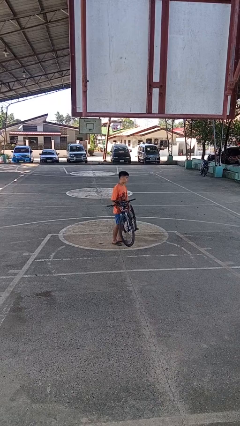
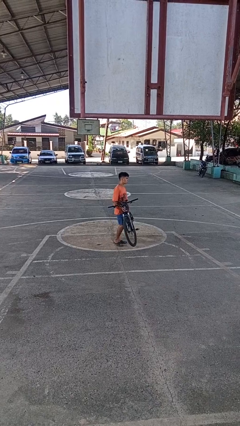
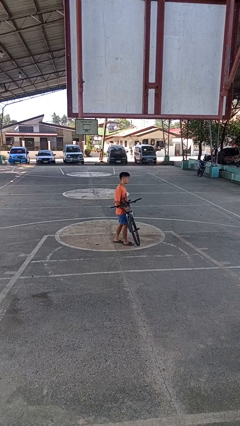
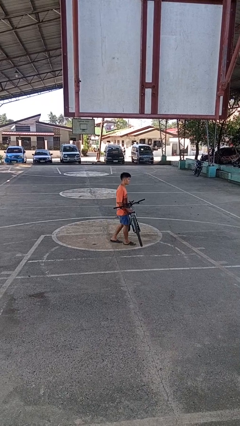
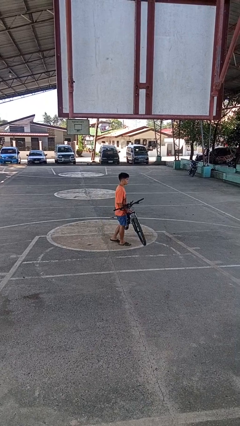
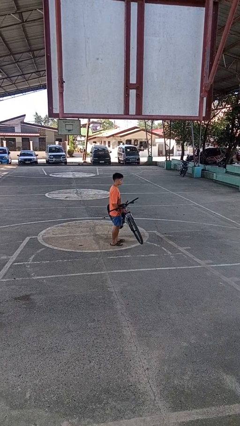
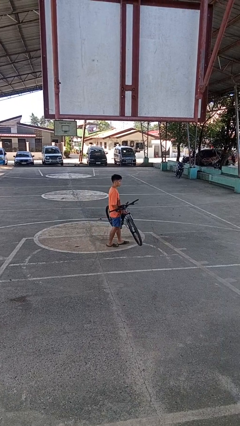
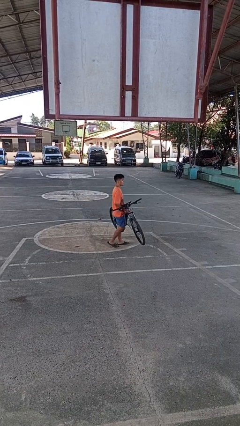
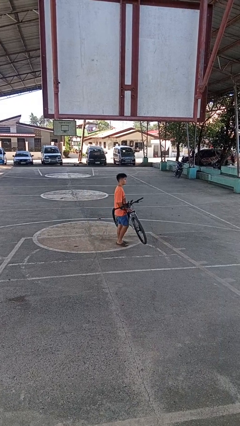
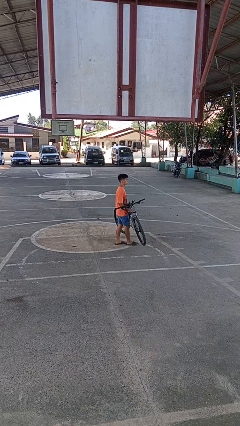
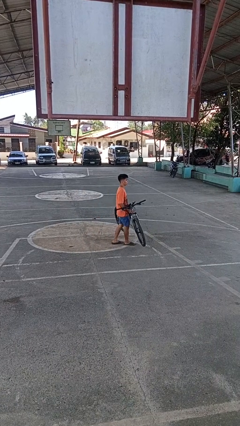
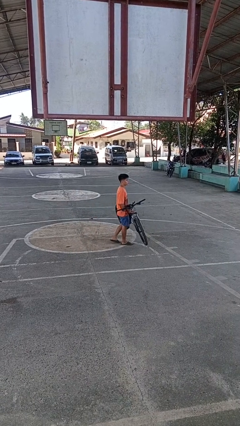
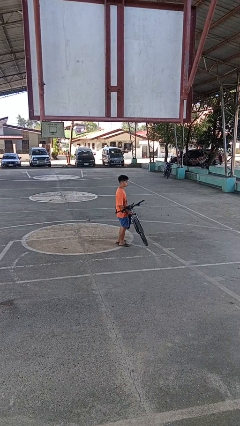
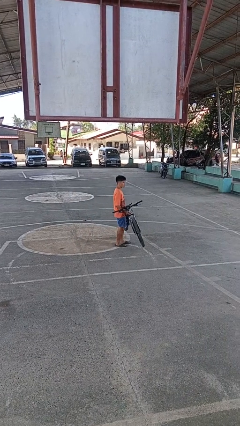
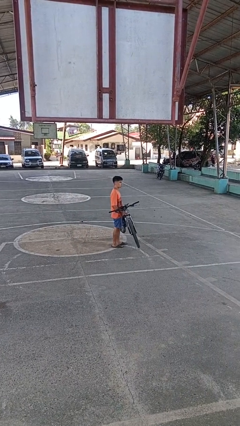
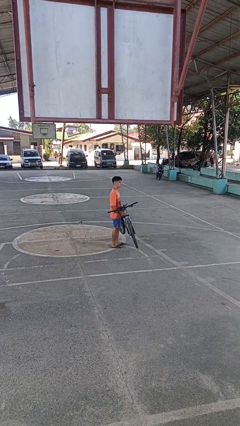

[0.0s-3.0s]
person carries bicycle

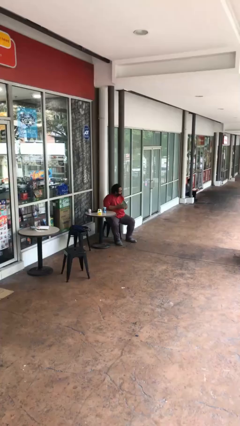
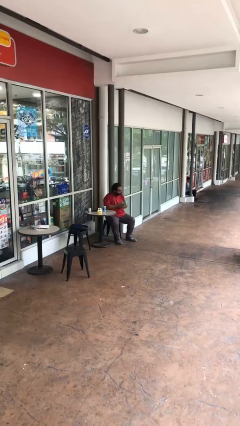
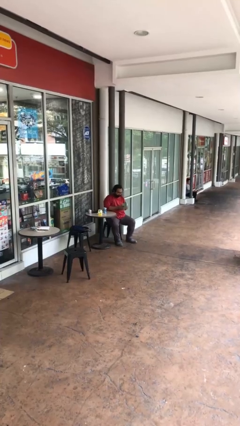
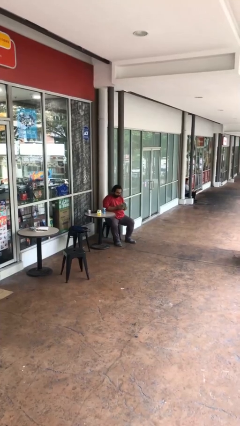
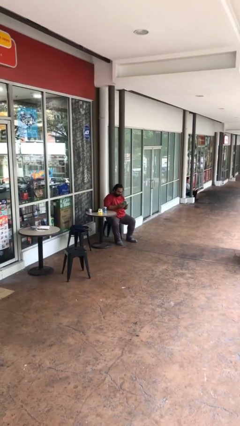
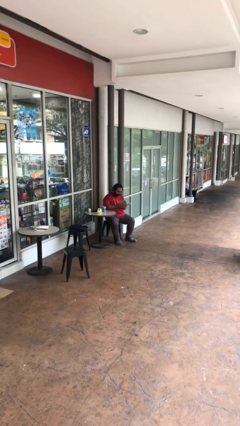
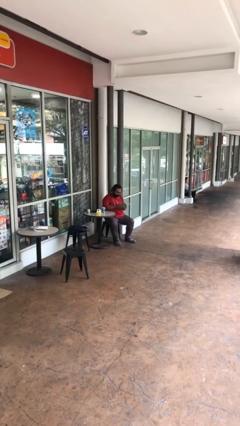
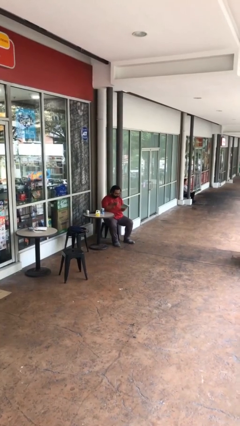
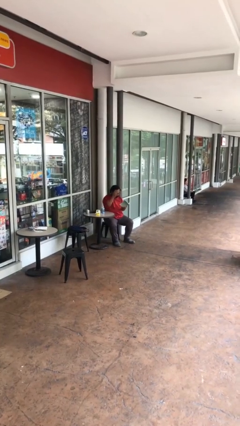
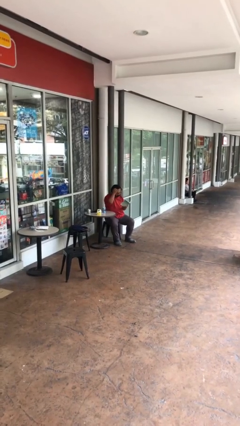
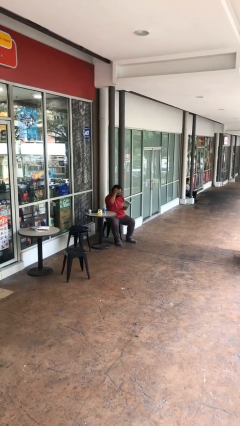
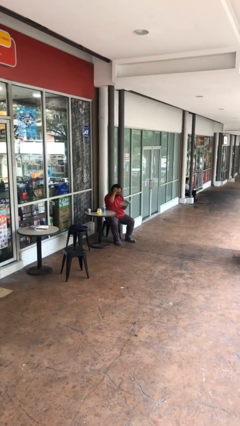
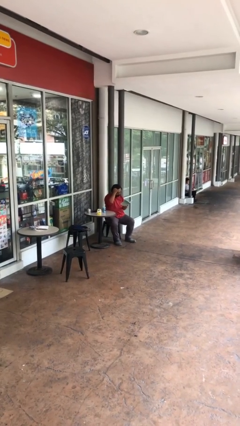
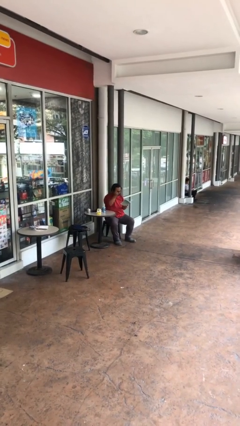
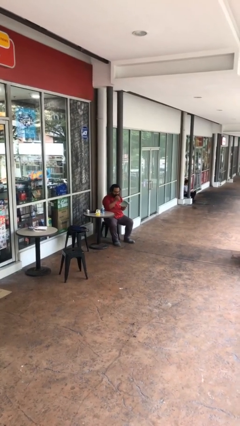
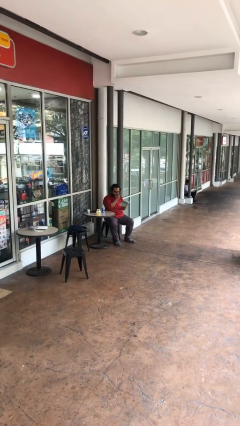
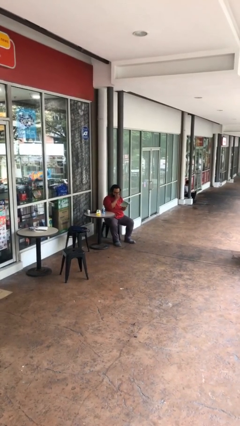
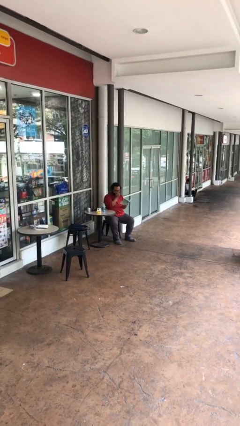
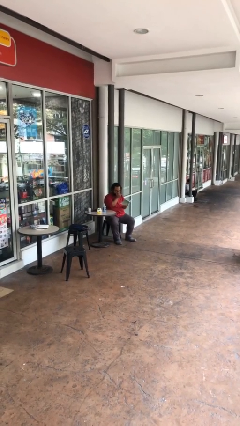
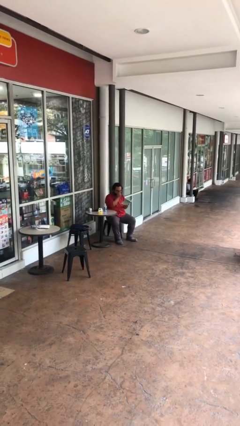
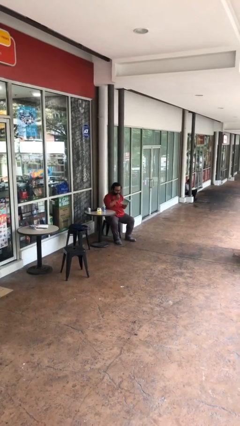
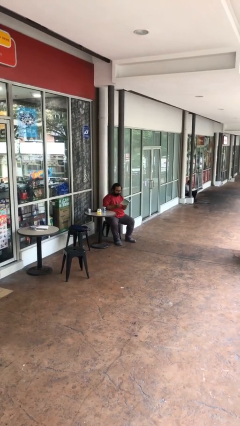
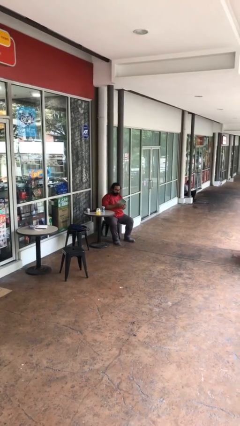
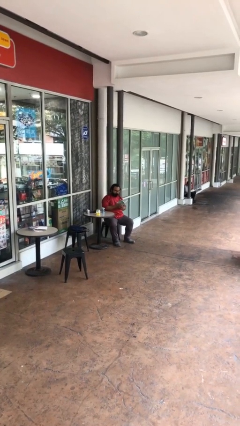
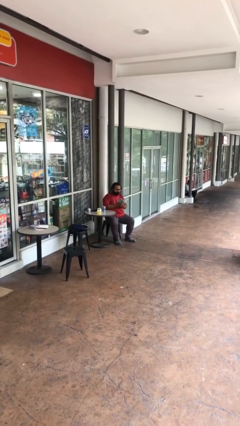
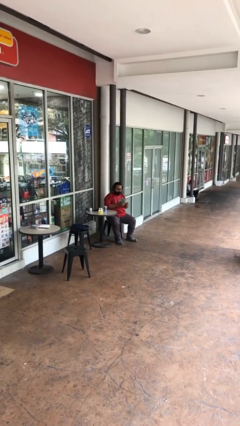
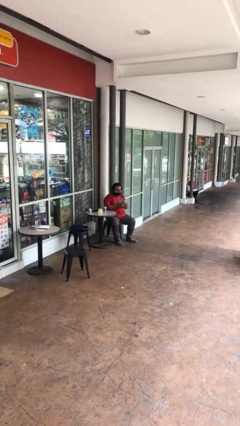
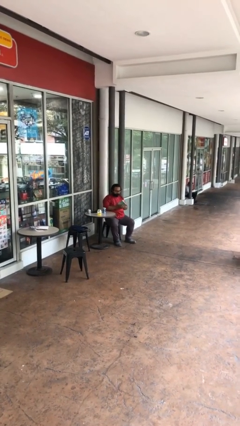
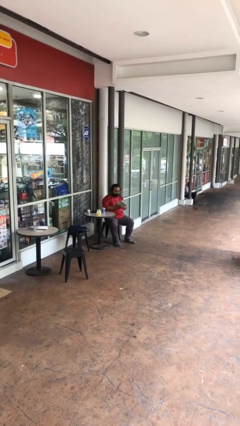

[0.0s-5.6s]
person reads document

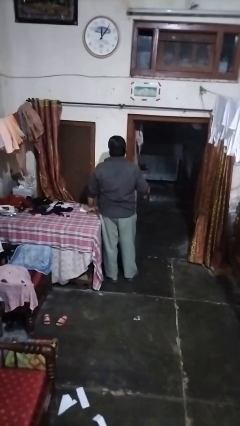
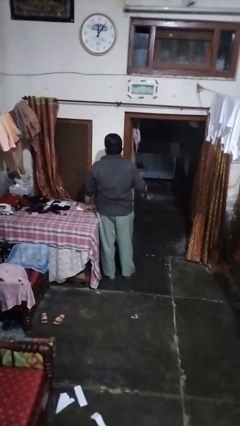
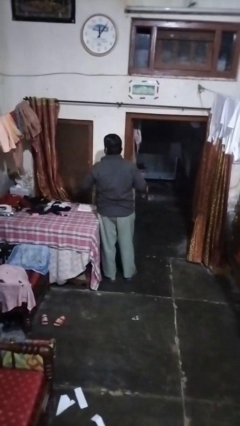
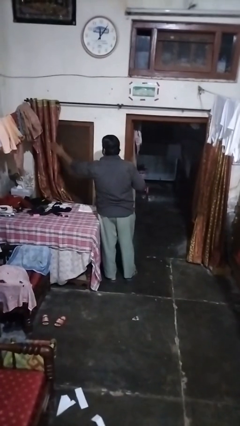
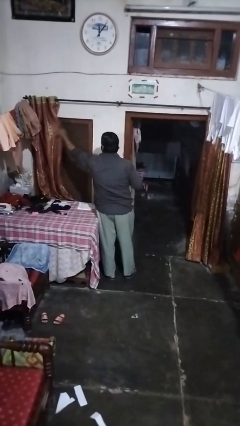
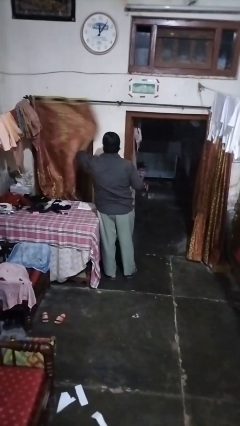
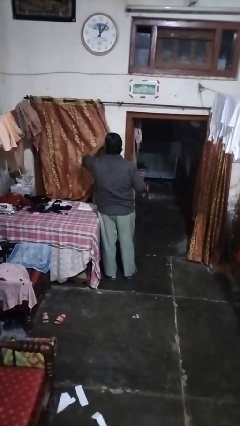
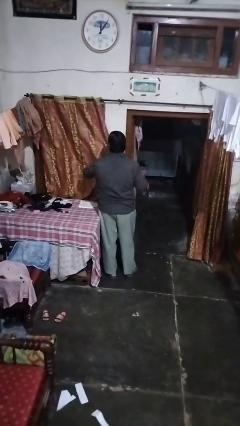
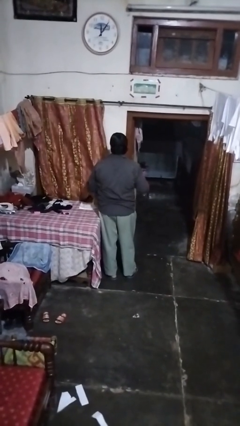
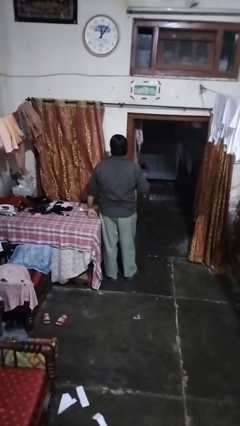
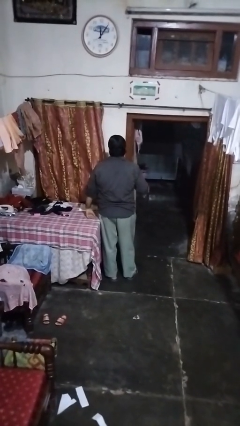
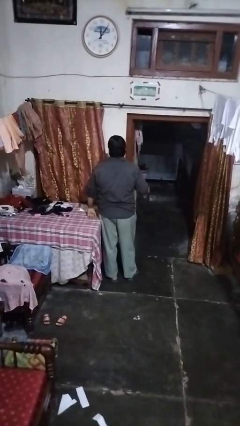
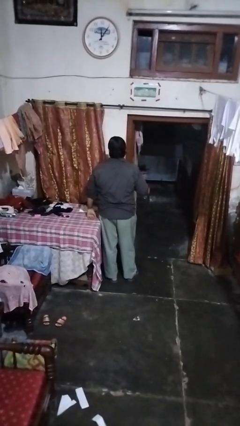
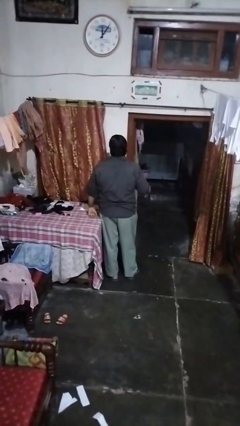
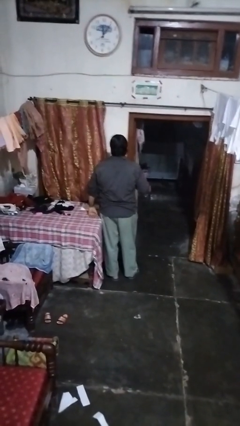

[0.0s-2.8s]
person closes curtains

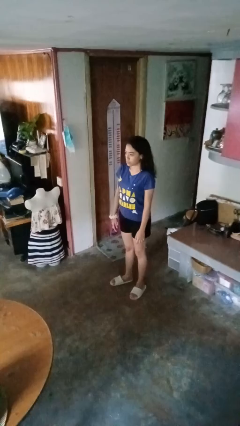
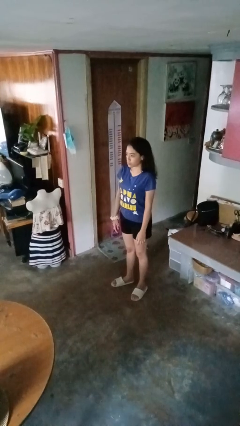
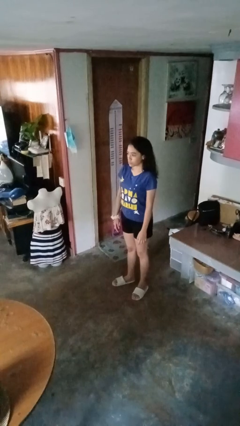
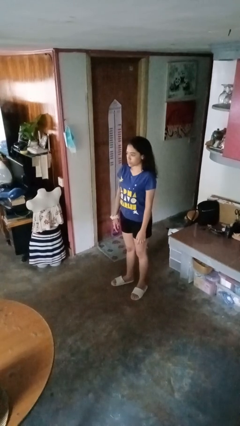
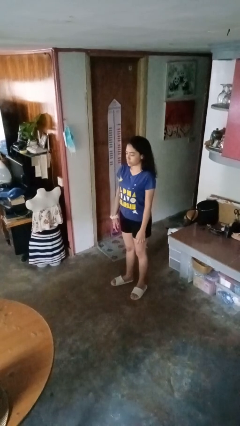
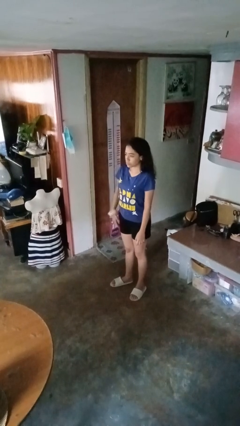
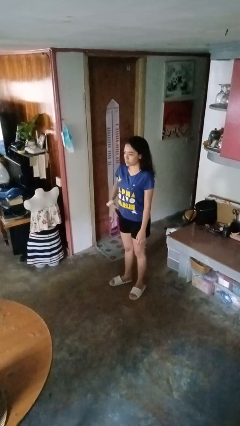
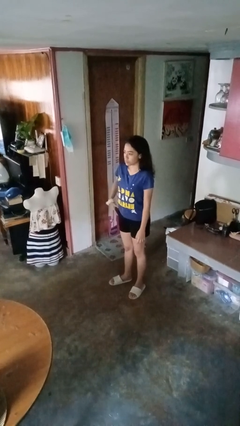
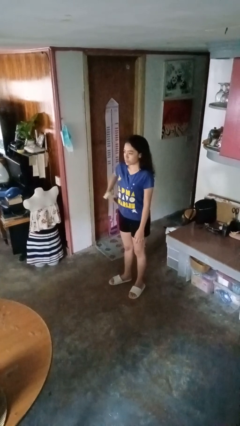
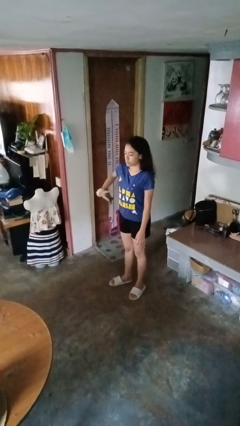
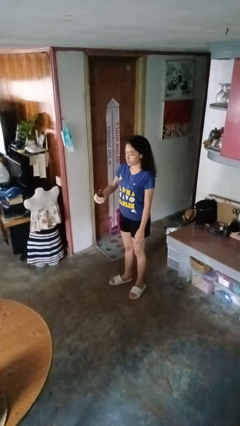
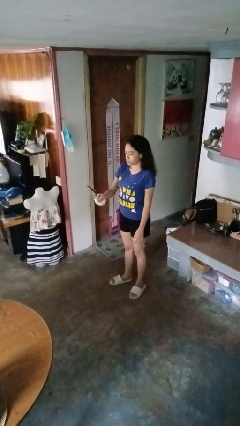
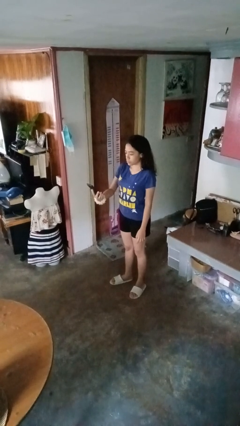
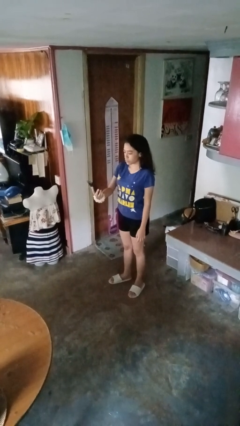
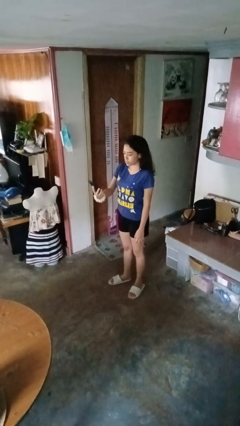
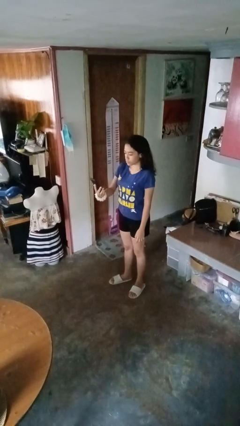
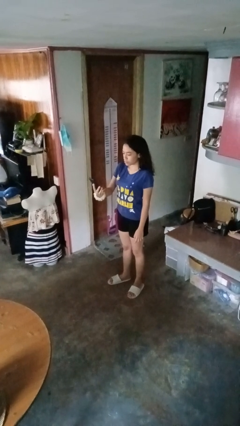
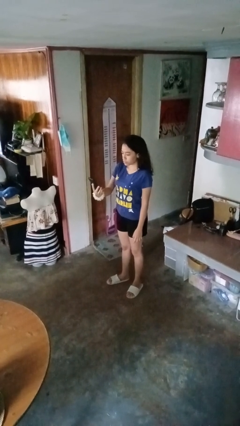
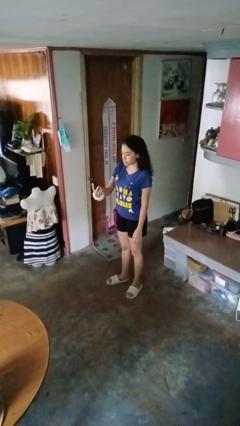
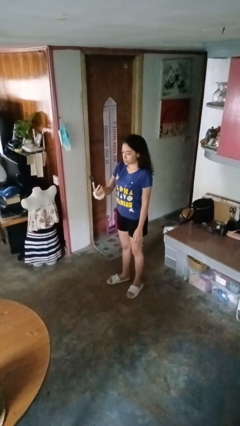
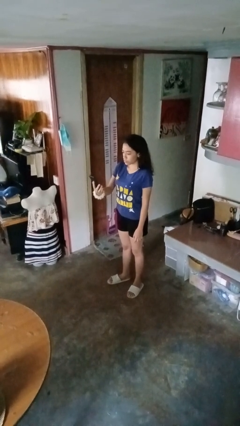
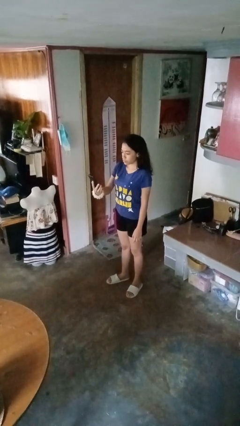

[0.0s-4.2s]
person takes phone from pocket

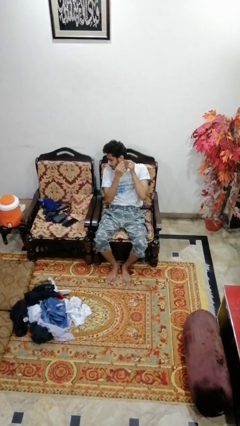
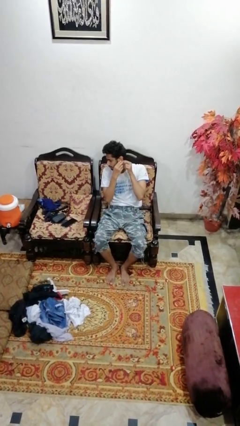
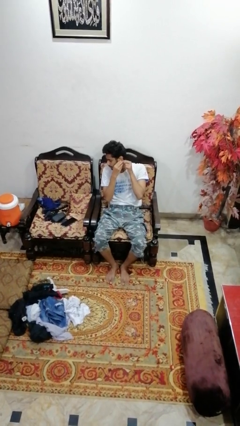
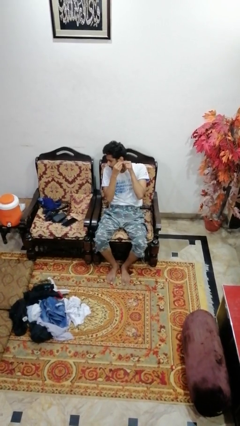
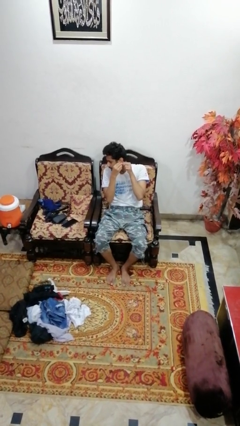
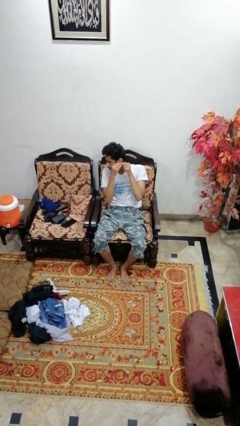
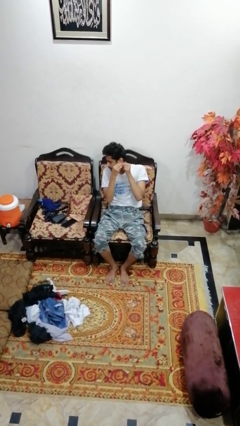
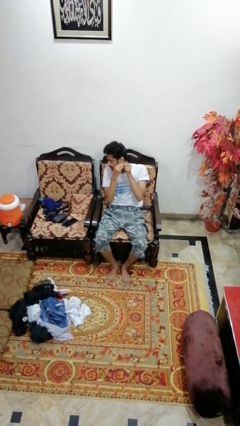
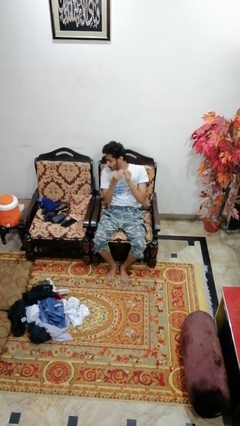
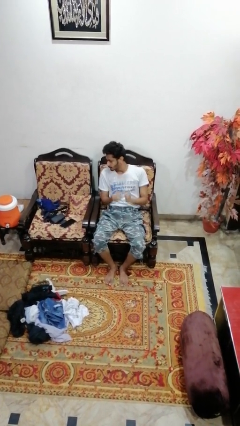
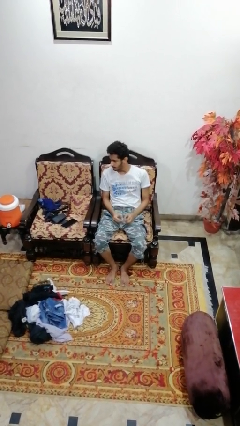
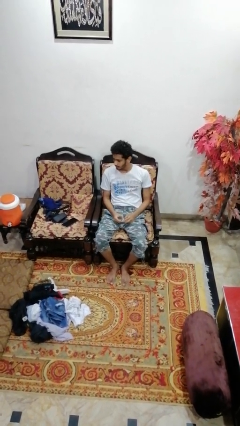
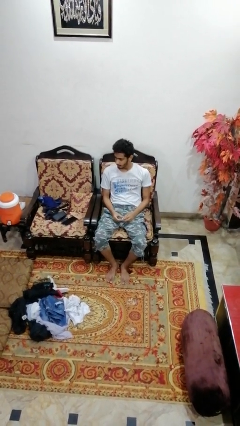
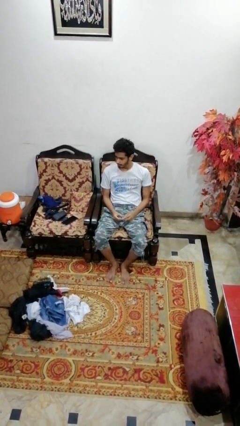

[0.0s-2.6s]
person takes off earrings
